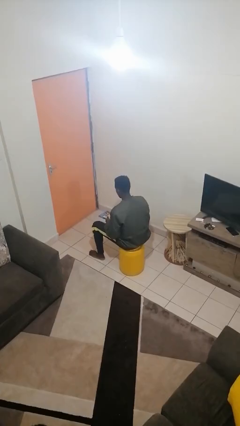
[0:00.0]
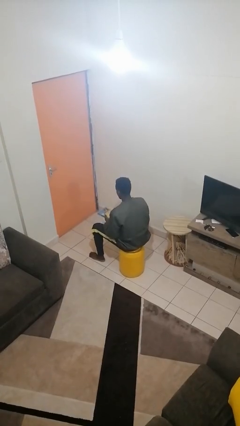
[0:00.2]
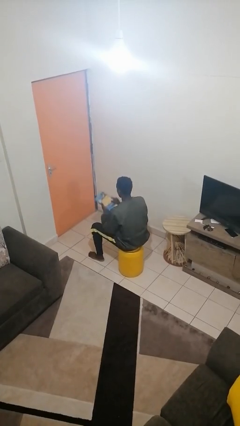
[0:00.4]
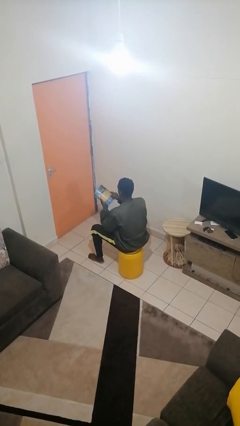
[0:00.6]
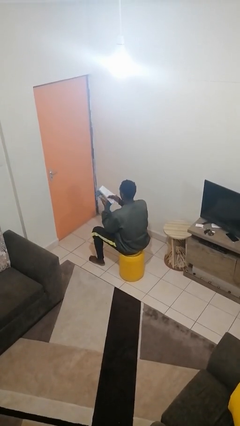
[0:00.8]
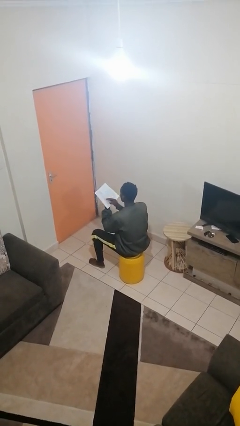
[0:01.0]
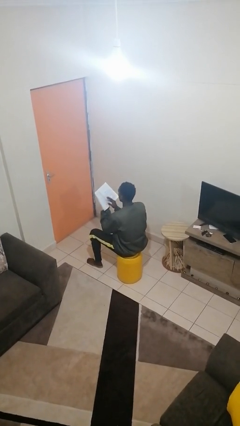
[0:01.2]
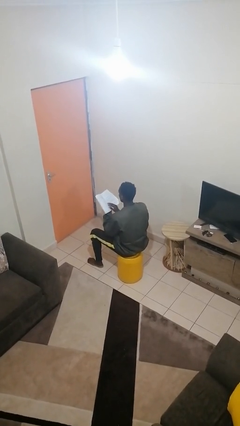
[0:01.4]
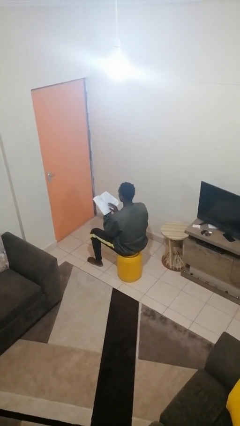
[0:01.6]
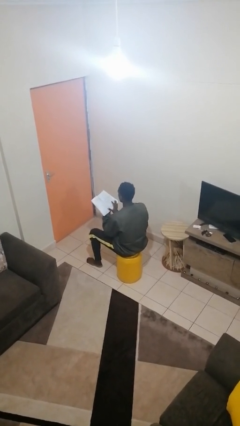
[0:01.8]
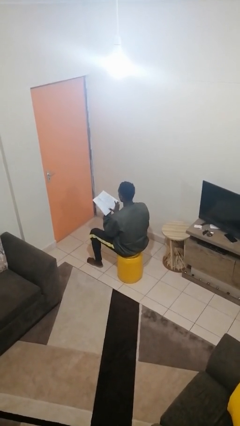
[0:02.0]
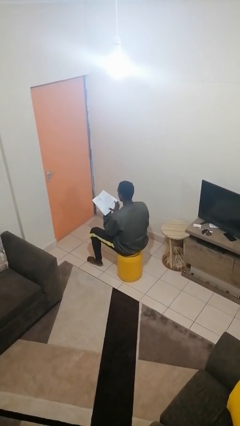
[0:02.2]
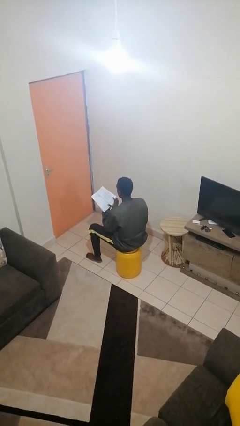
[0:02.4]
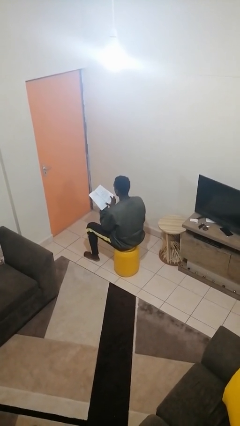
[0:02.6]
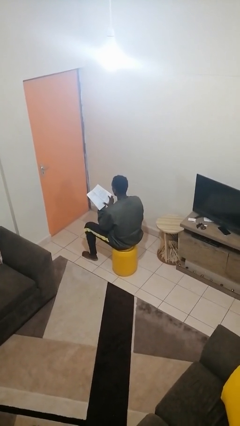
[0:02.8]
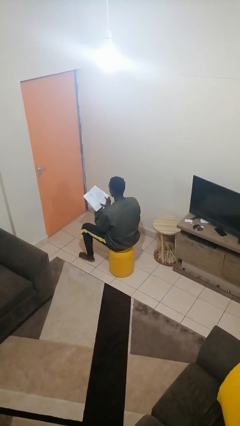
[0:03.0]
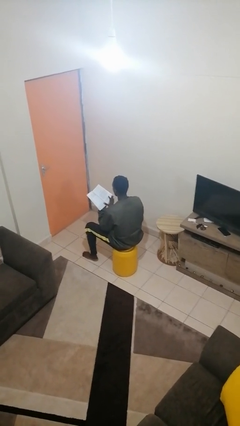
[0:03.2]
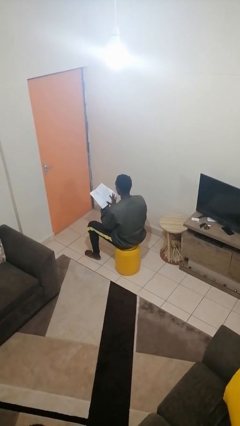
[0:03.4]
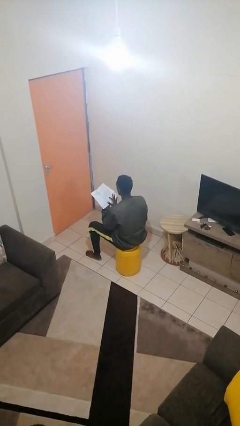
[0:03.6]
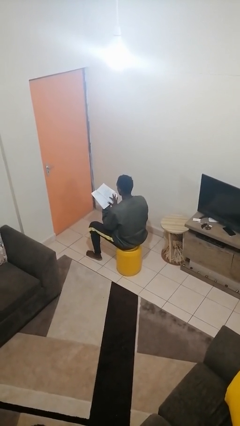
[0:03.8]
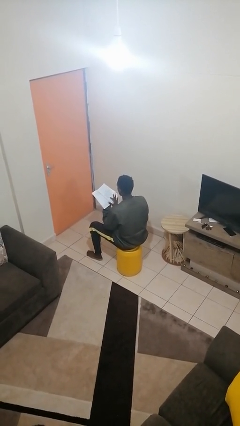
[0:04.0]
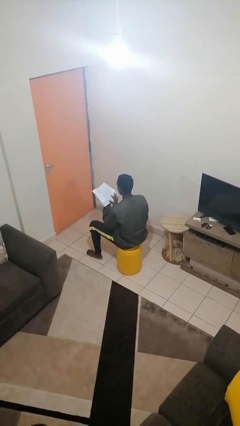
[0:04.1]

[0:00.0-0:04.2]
person reads book

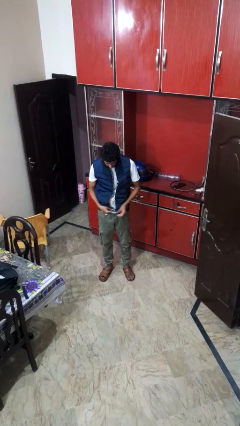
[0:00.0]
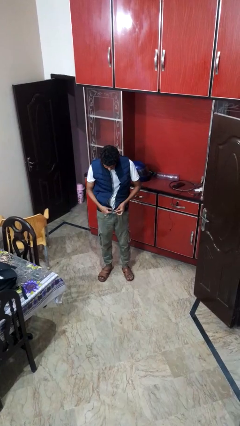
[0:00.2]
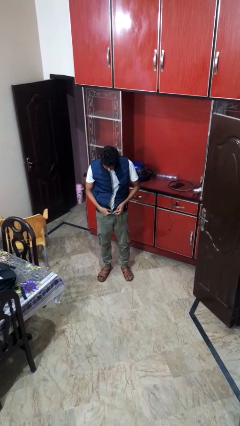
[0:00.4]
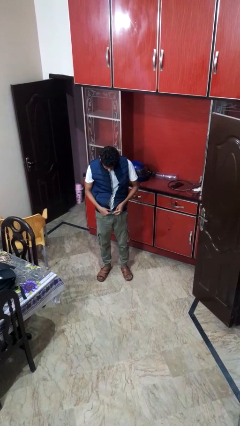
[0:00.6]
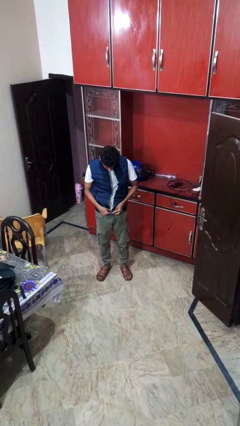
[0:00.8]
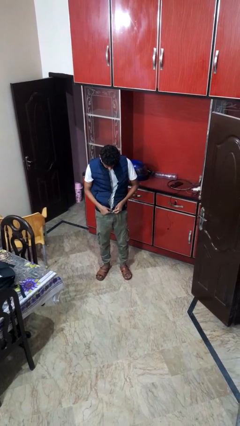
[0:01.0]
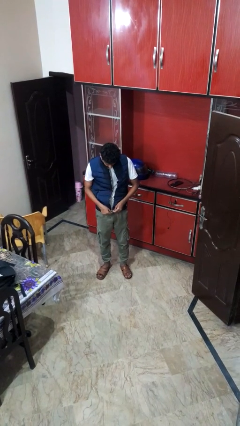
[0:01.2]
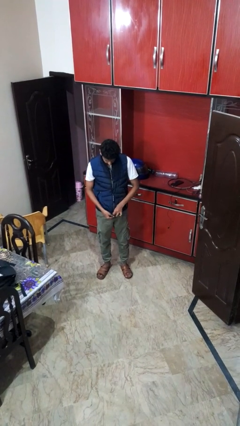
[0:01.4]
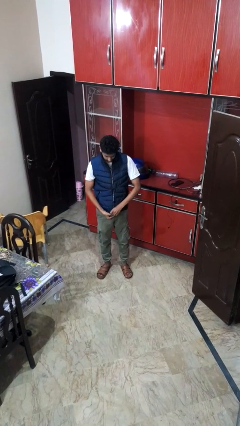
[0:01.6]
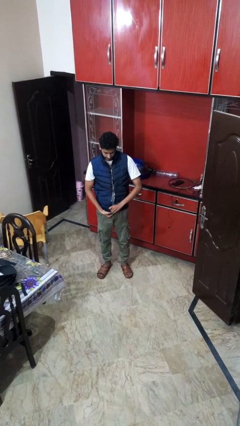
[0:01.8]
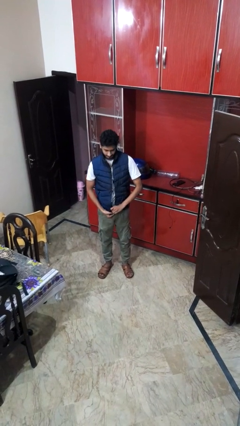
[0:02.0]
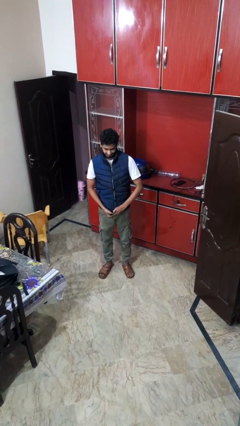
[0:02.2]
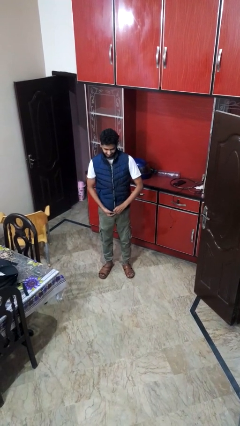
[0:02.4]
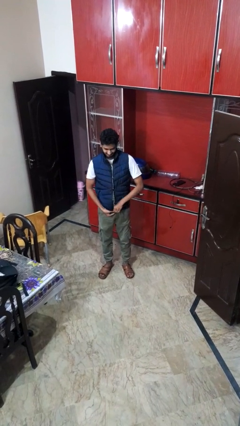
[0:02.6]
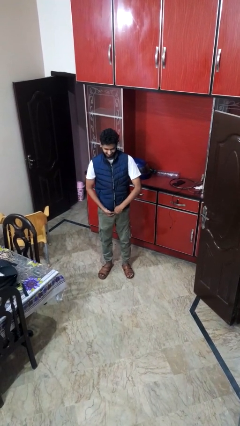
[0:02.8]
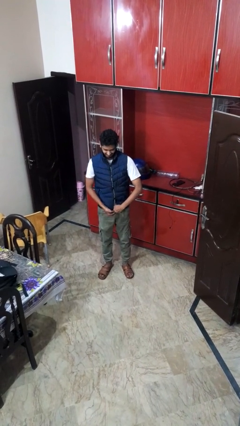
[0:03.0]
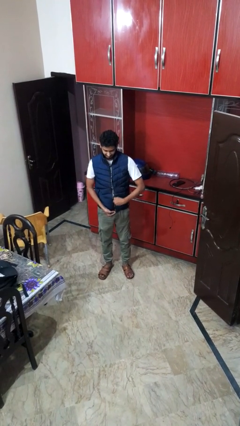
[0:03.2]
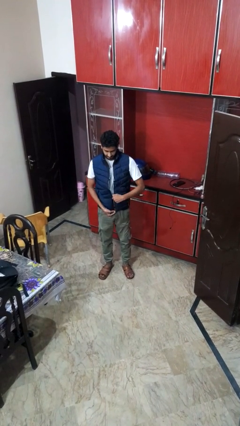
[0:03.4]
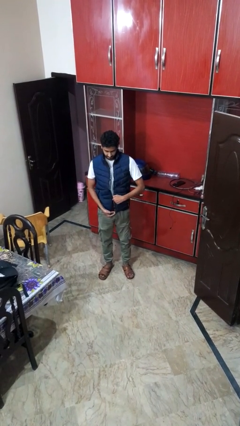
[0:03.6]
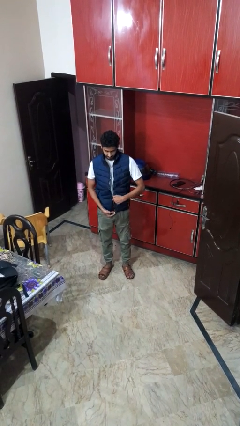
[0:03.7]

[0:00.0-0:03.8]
person zips up jacket

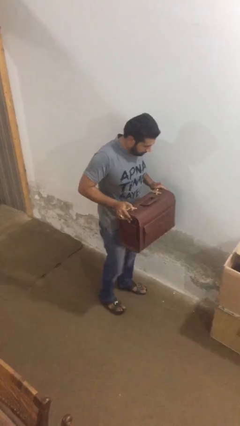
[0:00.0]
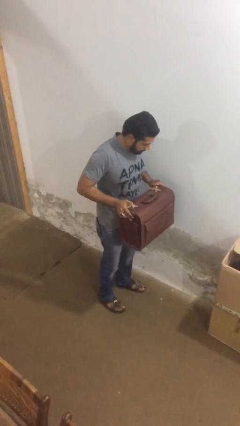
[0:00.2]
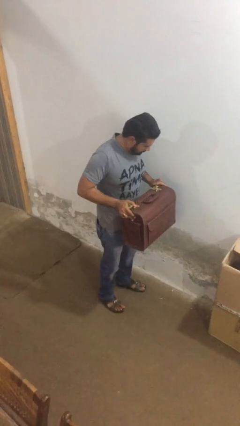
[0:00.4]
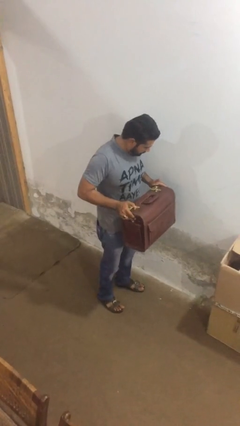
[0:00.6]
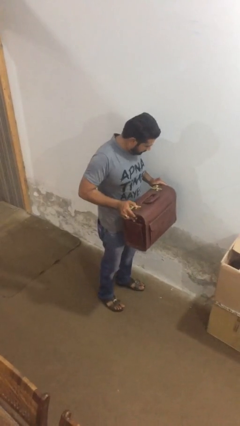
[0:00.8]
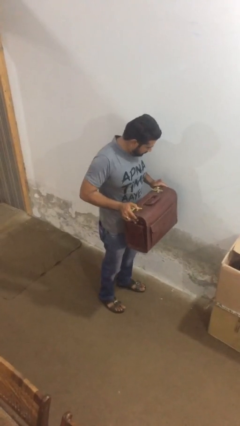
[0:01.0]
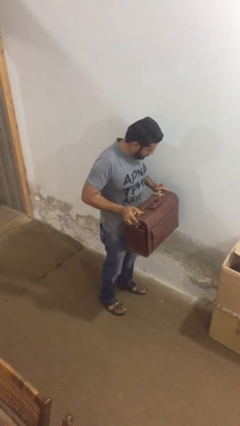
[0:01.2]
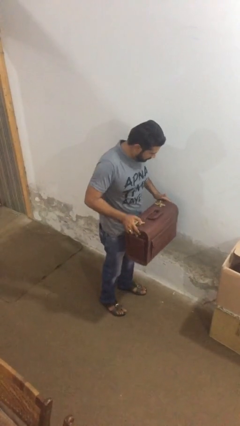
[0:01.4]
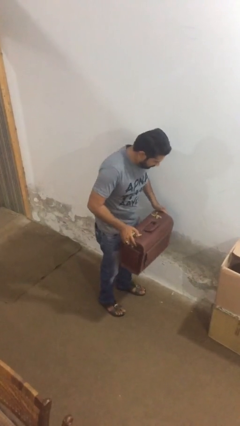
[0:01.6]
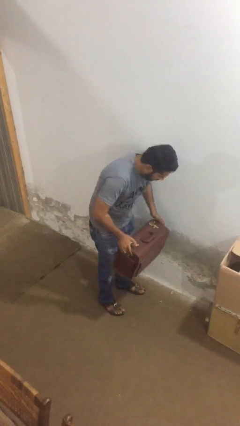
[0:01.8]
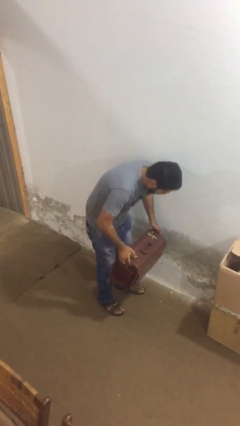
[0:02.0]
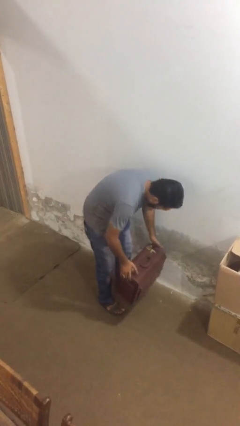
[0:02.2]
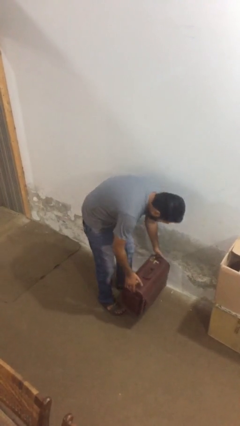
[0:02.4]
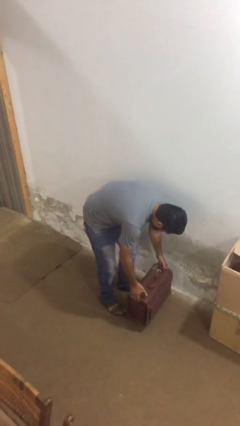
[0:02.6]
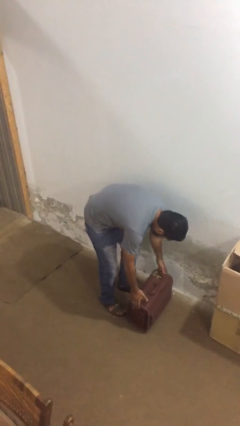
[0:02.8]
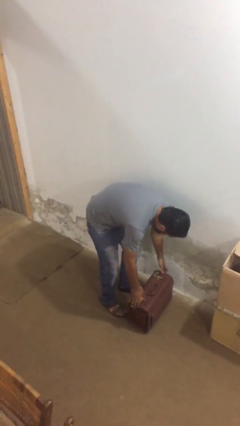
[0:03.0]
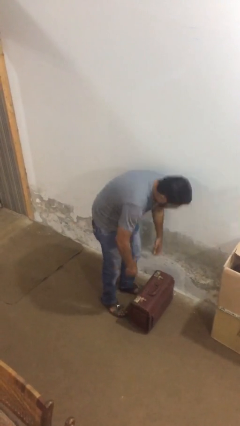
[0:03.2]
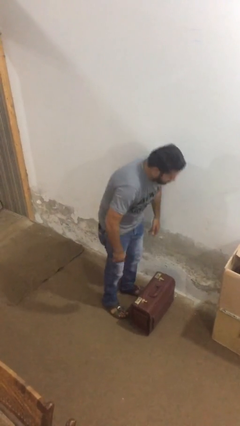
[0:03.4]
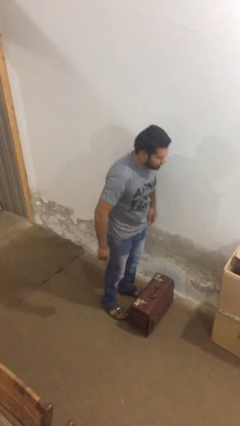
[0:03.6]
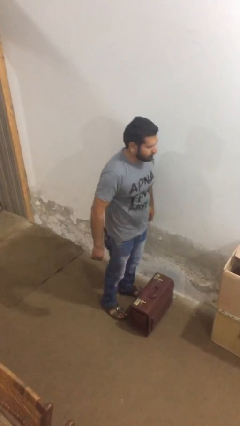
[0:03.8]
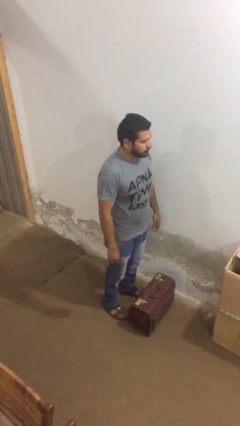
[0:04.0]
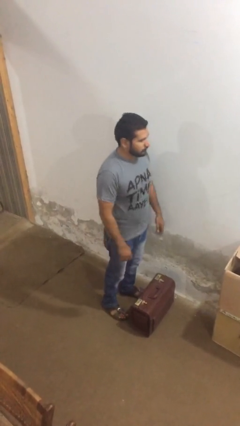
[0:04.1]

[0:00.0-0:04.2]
person puts down object on floor

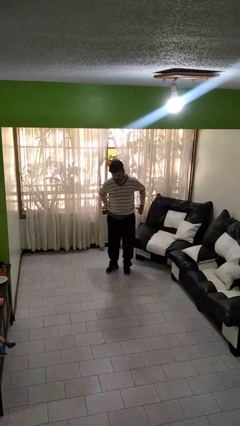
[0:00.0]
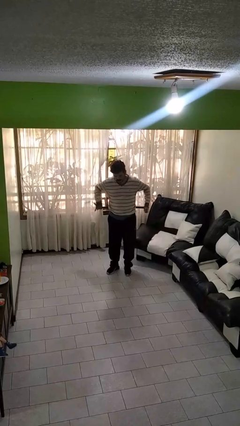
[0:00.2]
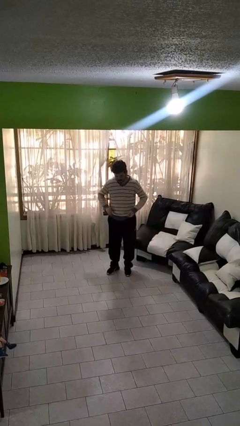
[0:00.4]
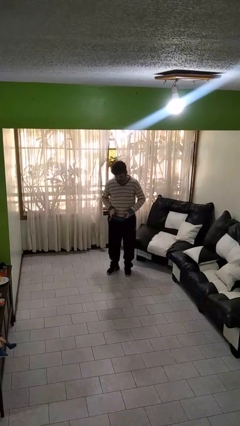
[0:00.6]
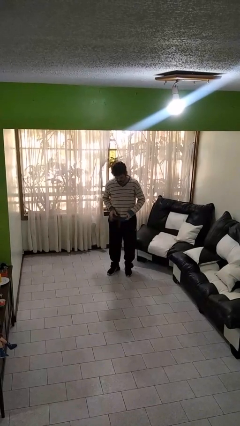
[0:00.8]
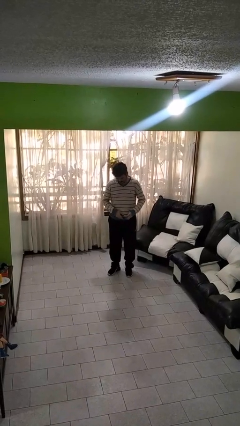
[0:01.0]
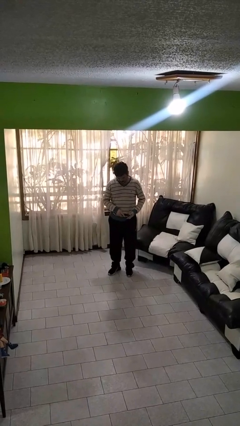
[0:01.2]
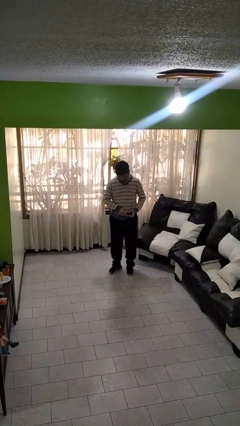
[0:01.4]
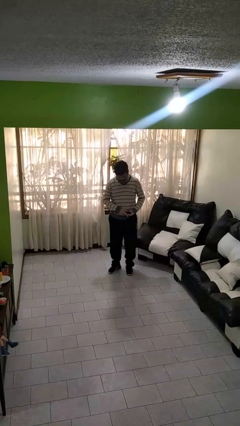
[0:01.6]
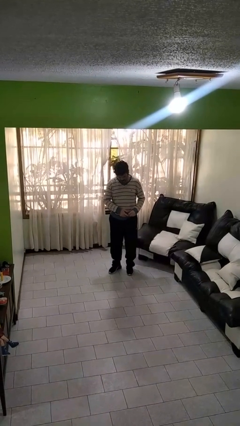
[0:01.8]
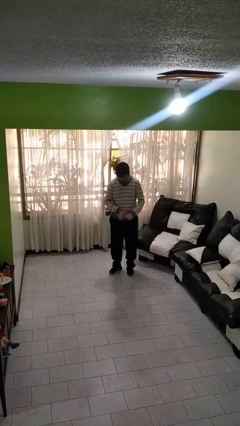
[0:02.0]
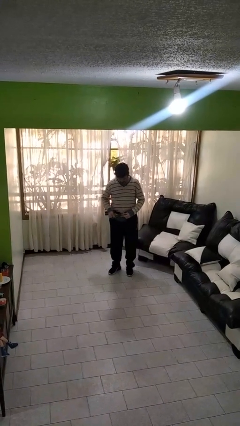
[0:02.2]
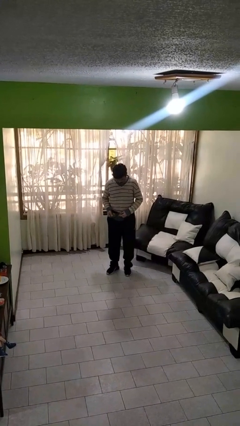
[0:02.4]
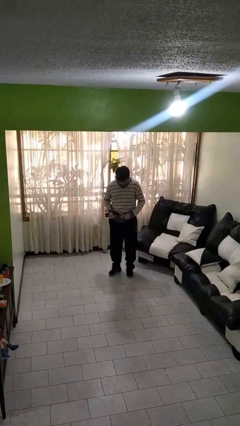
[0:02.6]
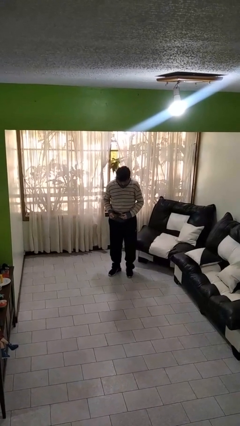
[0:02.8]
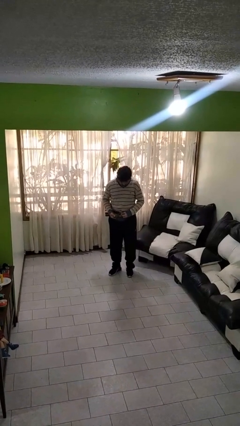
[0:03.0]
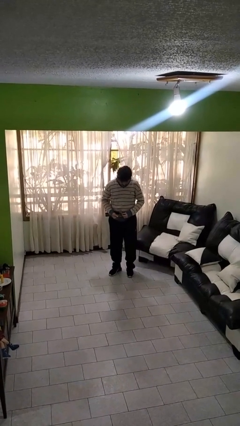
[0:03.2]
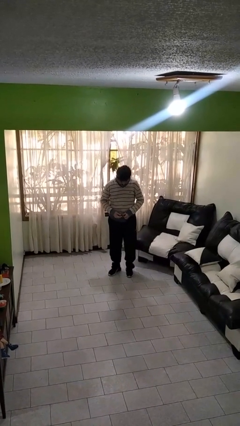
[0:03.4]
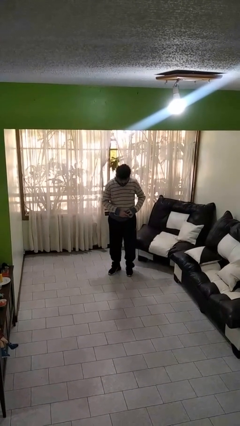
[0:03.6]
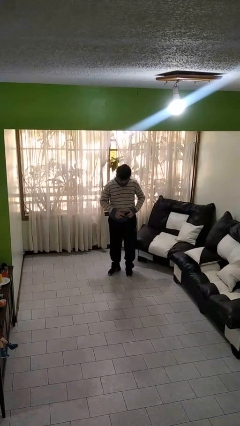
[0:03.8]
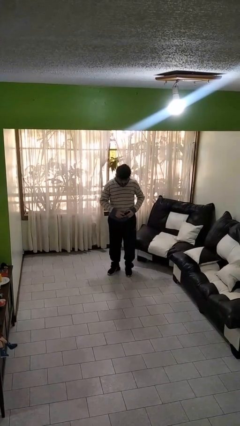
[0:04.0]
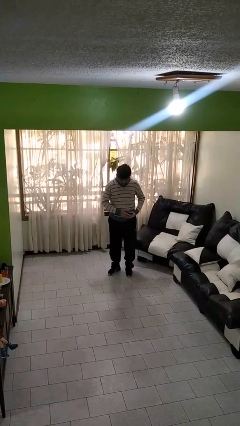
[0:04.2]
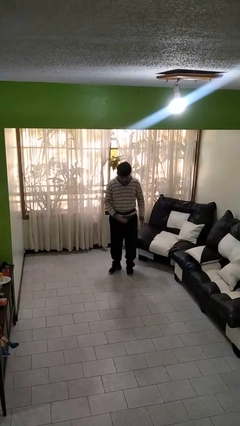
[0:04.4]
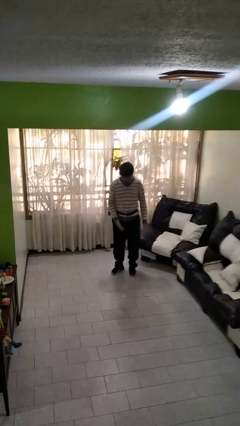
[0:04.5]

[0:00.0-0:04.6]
person puts on belt

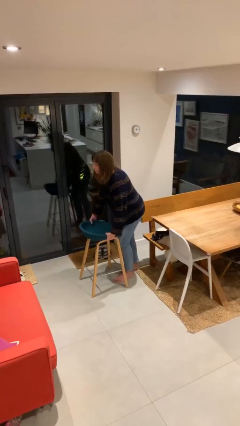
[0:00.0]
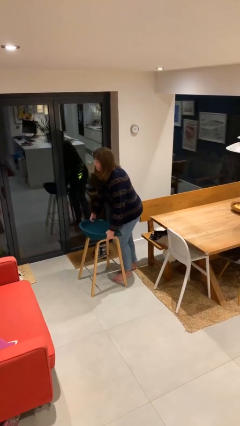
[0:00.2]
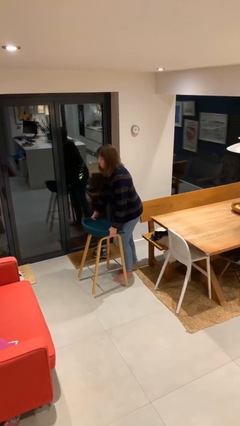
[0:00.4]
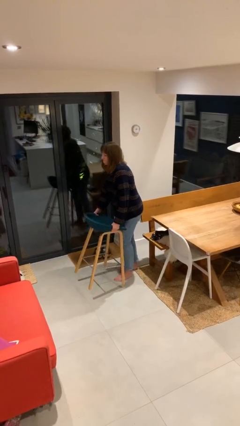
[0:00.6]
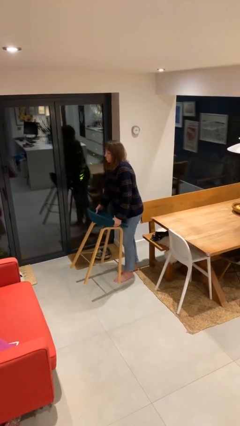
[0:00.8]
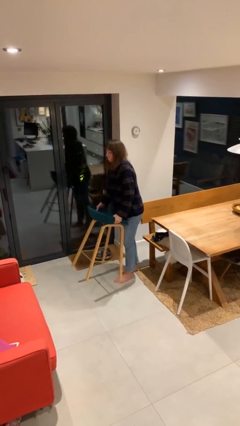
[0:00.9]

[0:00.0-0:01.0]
person picks up object from floor

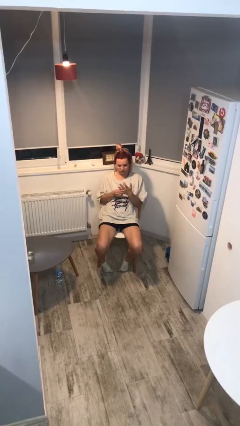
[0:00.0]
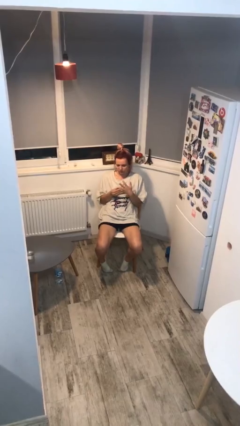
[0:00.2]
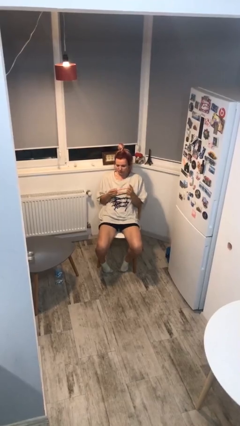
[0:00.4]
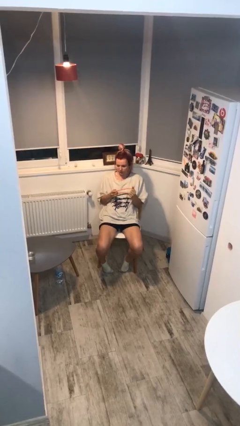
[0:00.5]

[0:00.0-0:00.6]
person takes off ring
